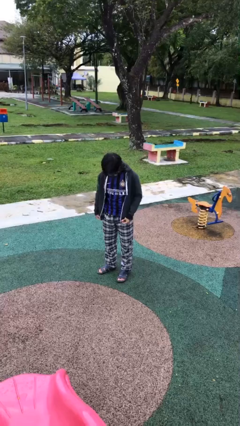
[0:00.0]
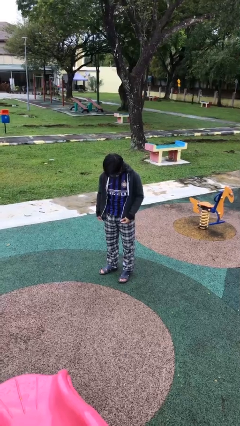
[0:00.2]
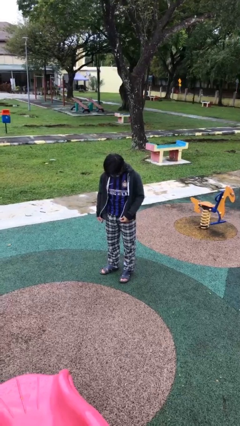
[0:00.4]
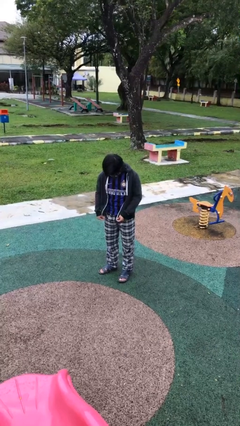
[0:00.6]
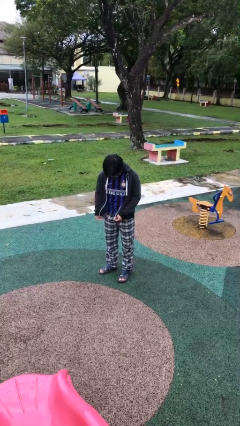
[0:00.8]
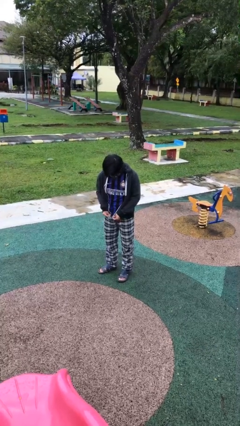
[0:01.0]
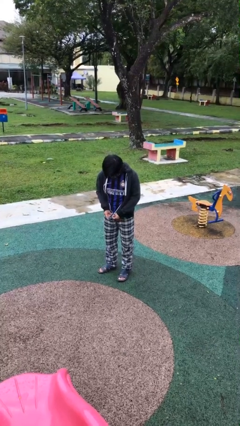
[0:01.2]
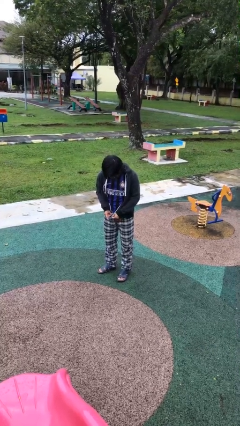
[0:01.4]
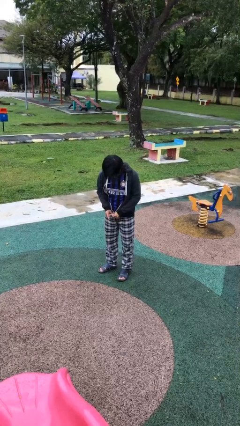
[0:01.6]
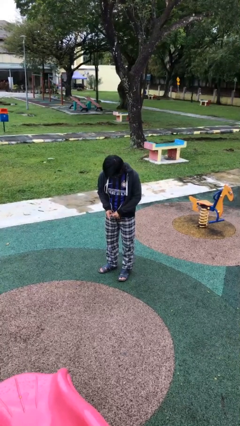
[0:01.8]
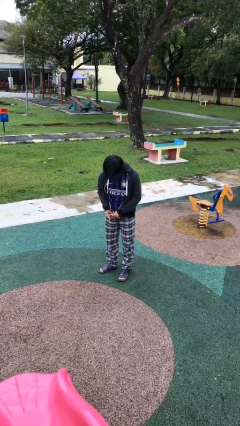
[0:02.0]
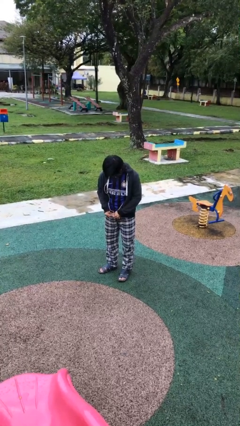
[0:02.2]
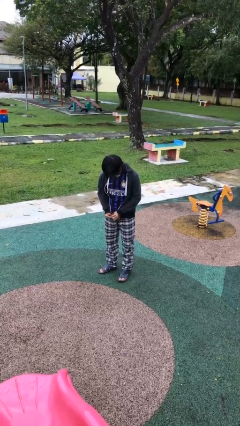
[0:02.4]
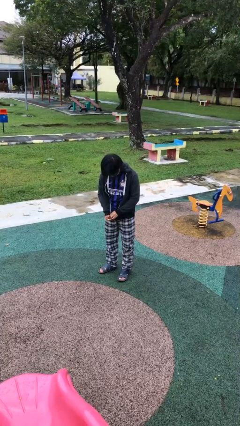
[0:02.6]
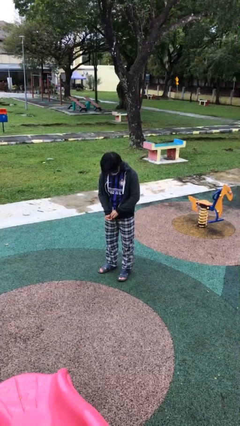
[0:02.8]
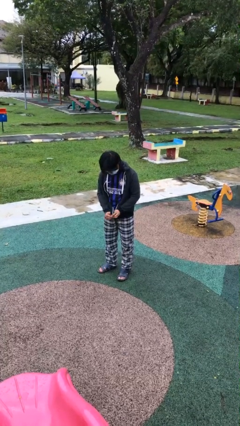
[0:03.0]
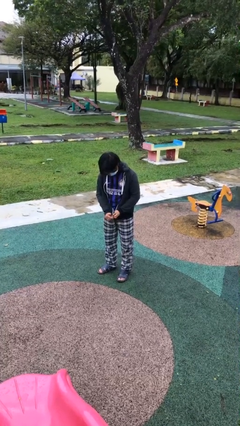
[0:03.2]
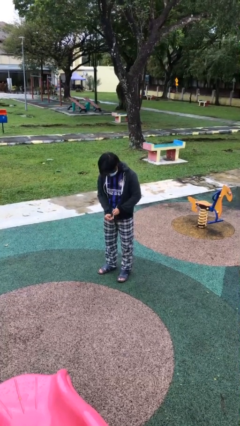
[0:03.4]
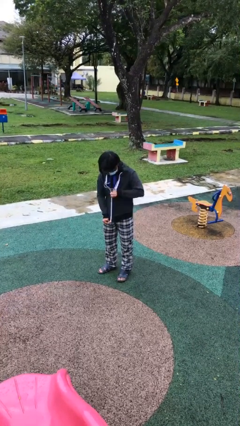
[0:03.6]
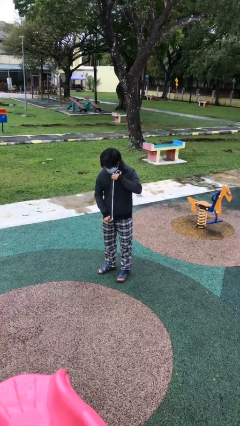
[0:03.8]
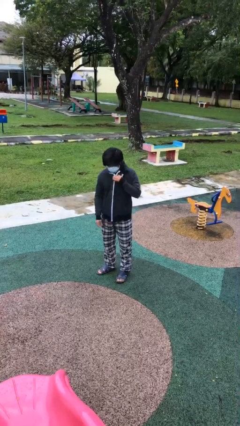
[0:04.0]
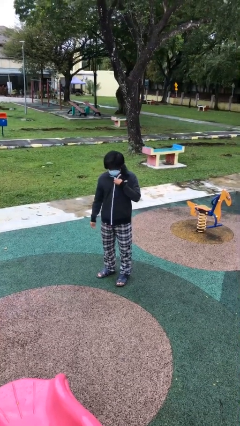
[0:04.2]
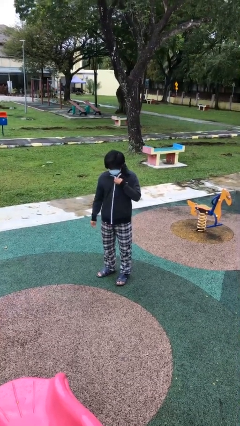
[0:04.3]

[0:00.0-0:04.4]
person zips up jacket

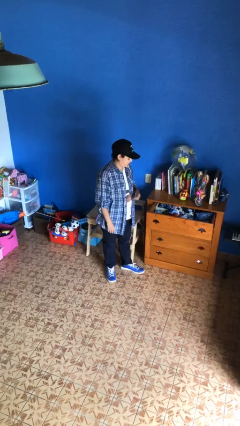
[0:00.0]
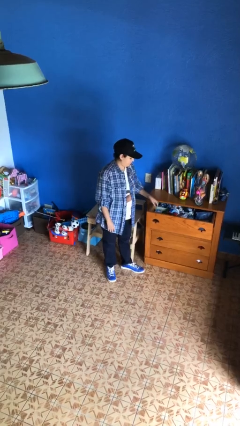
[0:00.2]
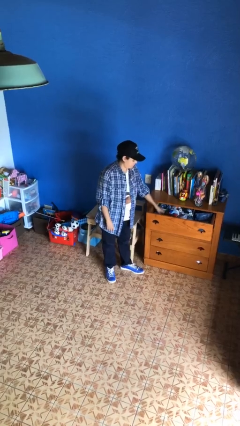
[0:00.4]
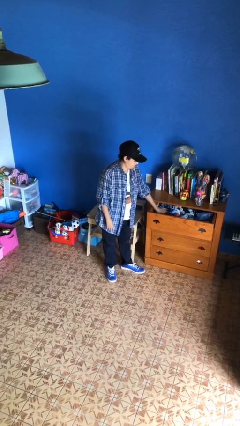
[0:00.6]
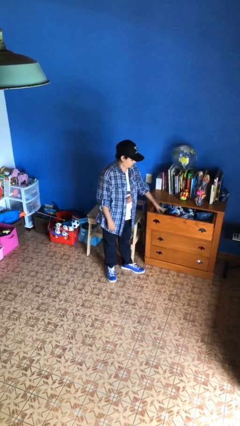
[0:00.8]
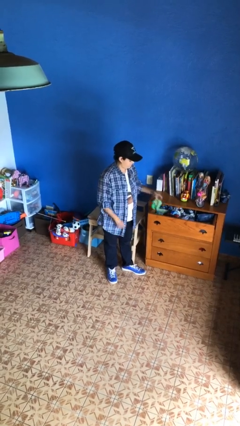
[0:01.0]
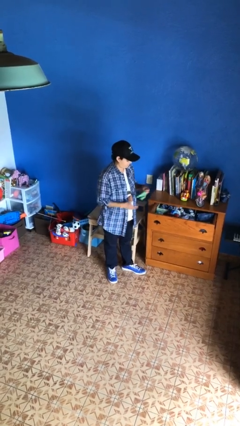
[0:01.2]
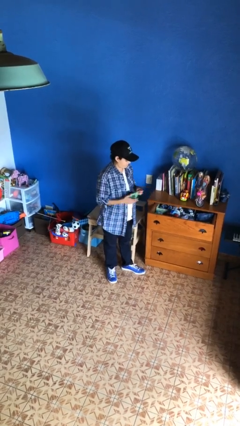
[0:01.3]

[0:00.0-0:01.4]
person takes clothes from dresser

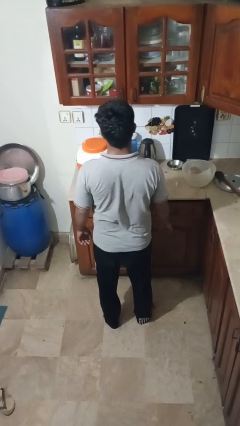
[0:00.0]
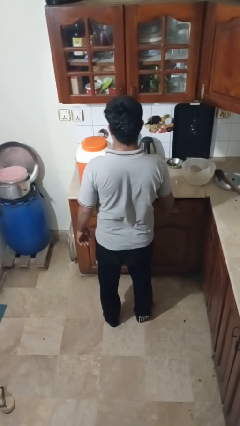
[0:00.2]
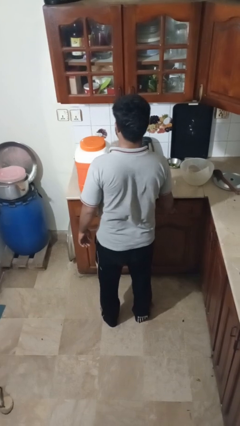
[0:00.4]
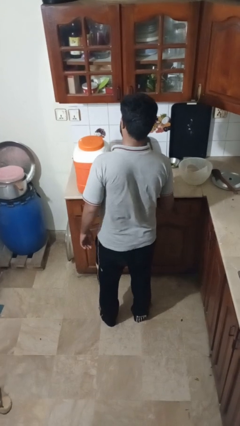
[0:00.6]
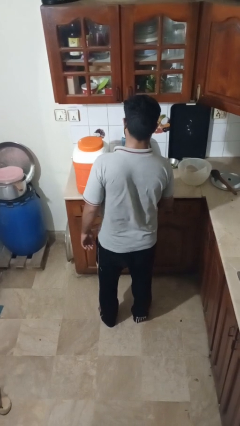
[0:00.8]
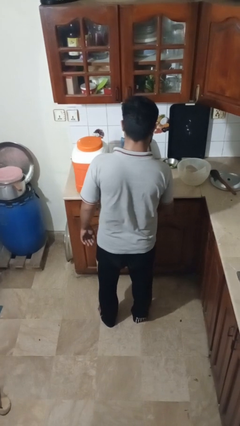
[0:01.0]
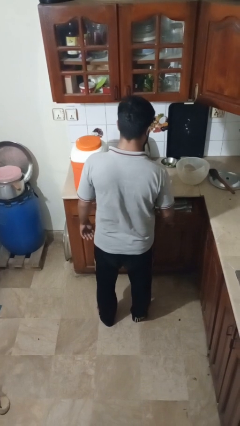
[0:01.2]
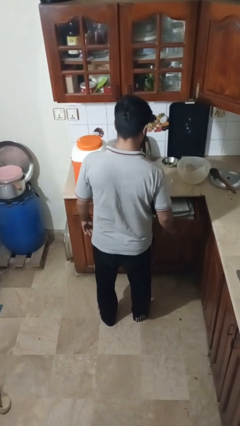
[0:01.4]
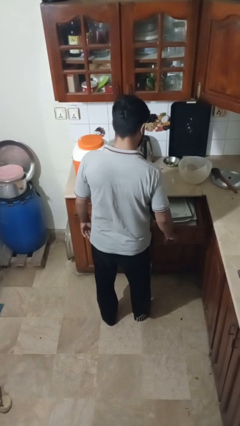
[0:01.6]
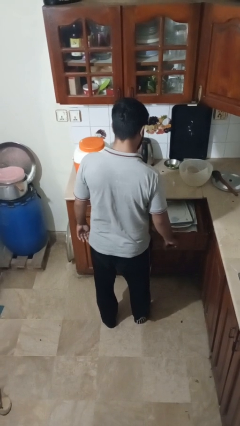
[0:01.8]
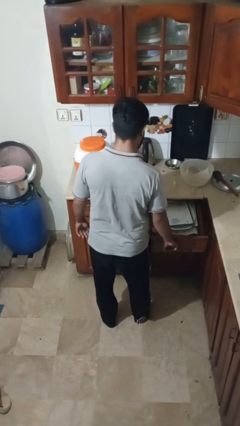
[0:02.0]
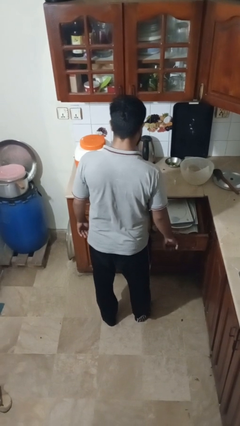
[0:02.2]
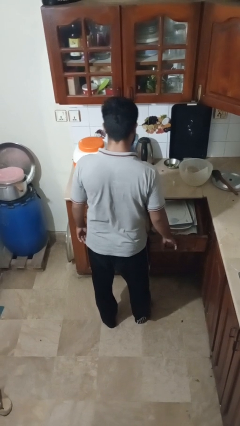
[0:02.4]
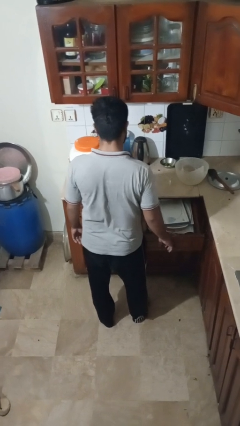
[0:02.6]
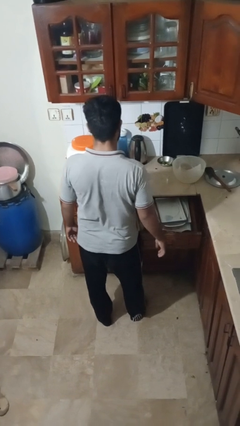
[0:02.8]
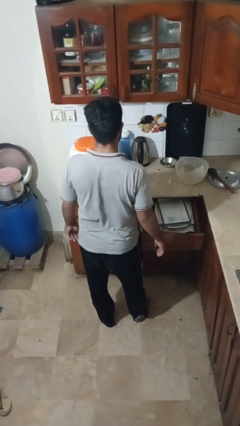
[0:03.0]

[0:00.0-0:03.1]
person opens kitchen drawer

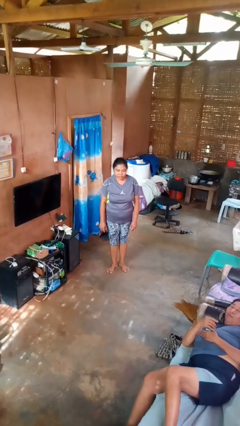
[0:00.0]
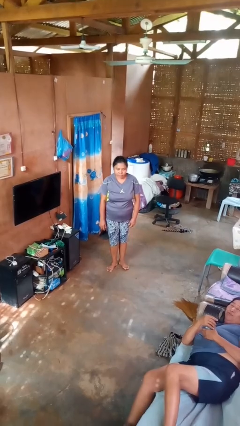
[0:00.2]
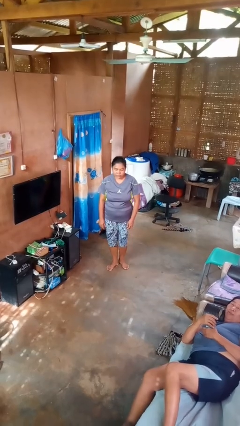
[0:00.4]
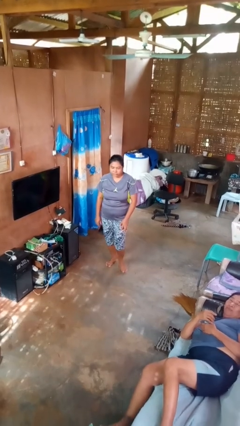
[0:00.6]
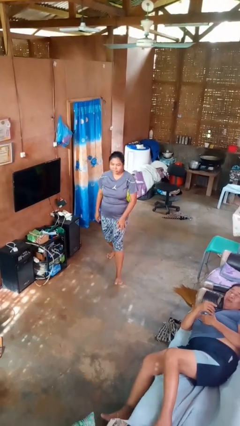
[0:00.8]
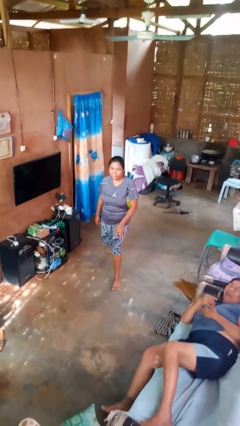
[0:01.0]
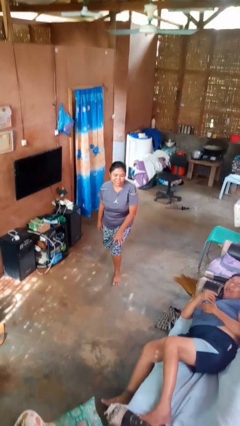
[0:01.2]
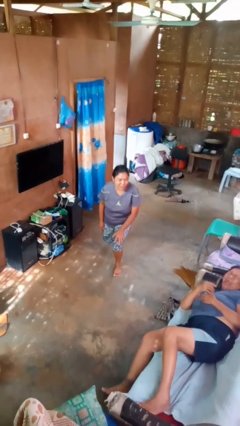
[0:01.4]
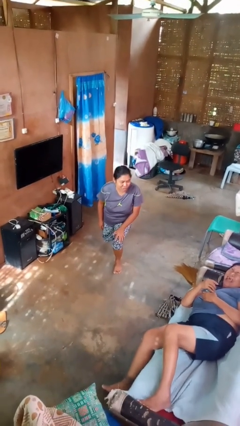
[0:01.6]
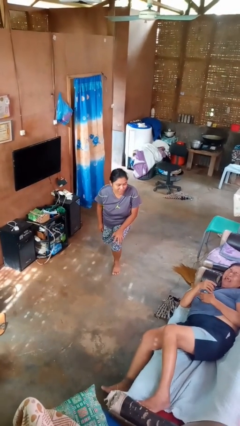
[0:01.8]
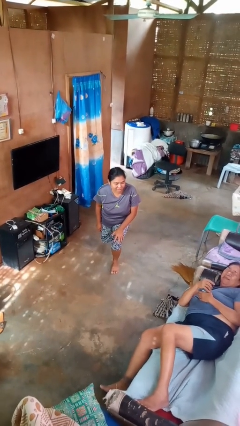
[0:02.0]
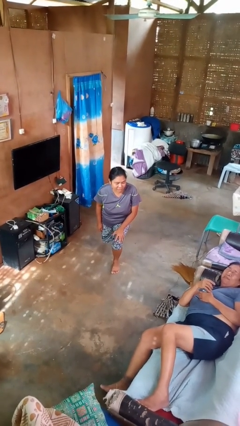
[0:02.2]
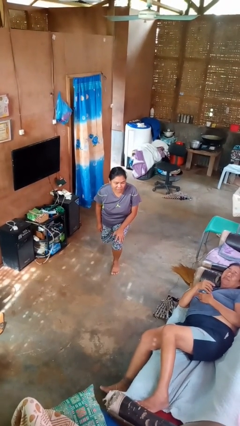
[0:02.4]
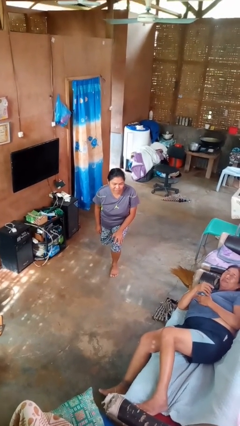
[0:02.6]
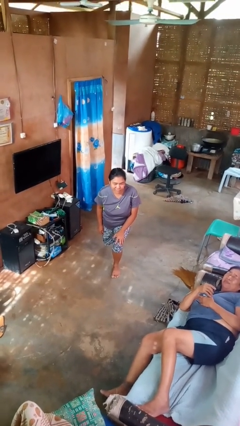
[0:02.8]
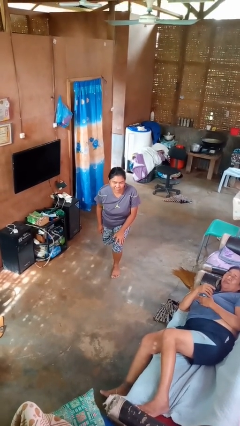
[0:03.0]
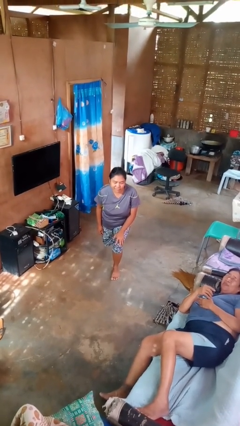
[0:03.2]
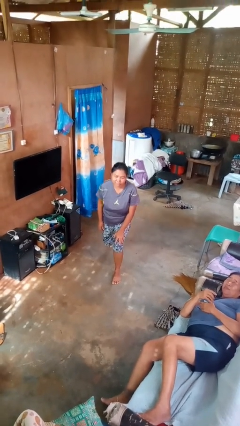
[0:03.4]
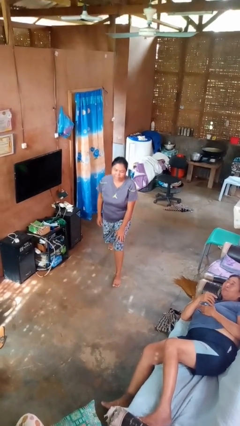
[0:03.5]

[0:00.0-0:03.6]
person exercises with lunges

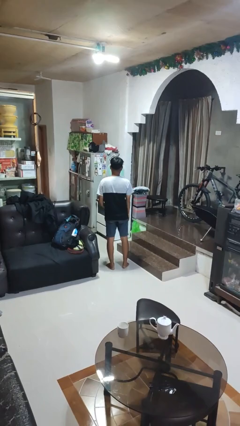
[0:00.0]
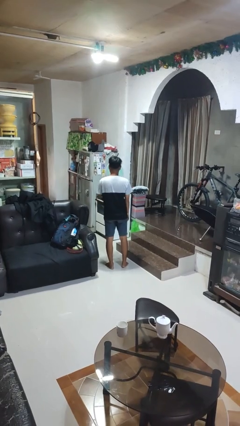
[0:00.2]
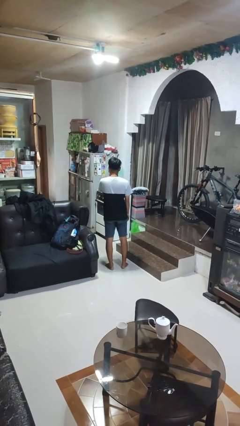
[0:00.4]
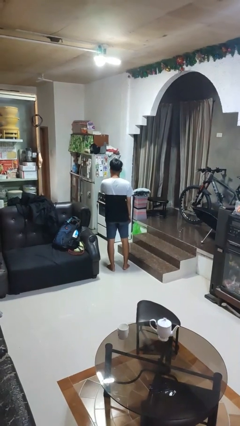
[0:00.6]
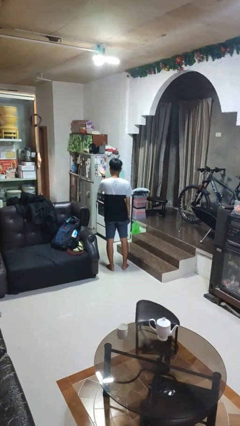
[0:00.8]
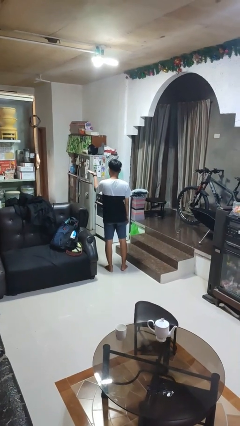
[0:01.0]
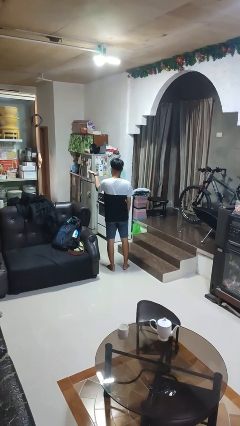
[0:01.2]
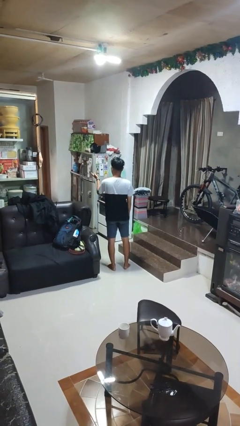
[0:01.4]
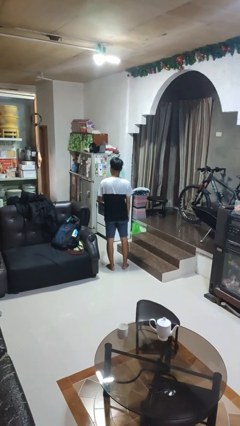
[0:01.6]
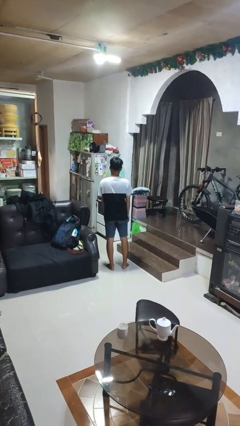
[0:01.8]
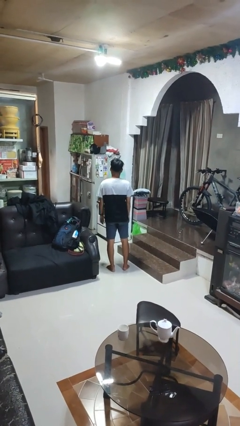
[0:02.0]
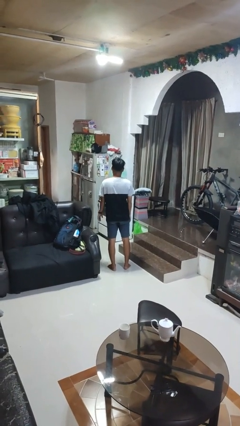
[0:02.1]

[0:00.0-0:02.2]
person gestures blow kiss

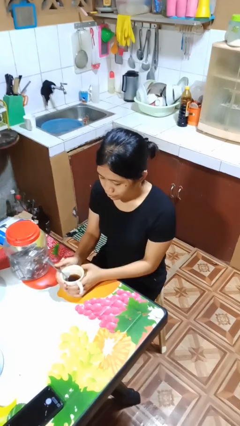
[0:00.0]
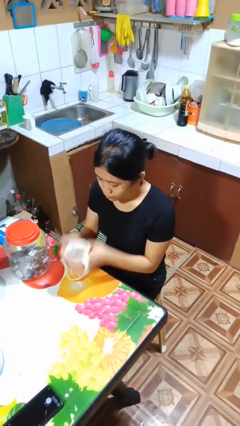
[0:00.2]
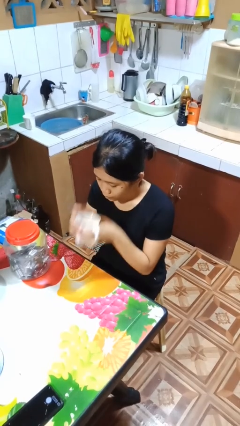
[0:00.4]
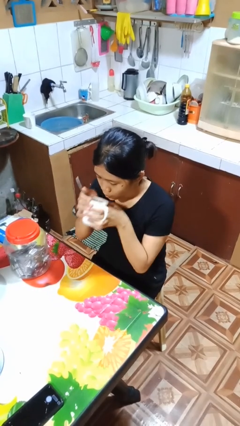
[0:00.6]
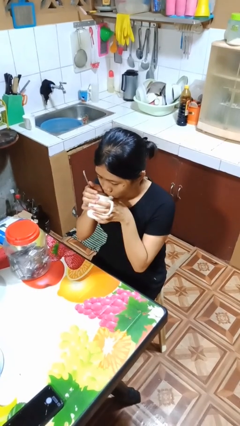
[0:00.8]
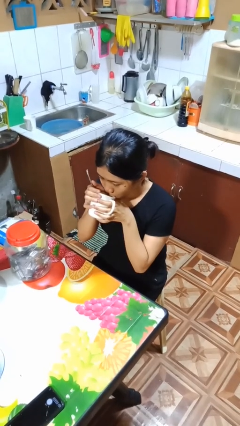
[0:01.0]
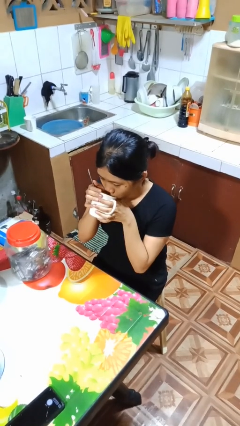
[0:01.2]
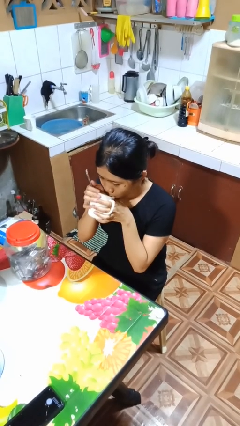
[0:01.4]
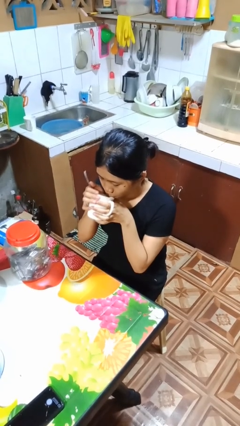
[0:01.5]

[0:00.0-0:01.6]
person drinks from mug

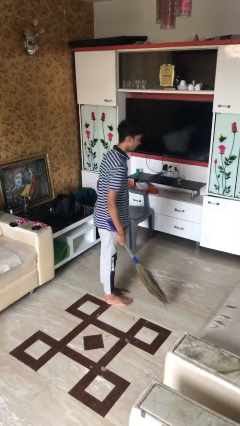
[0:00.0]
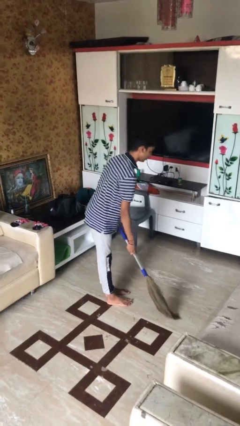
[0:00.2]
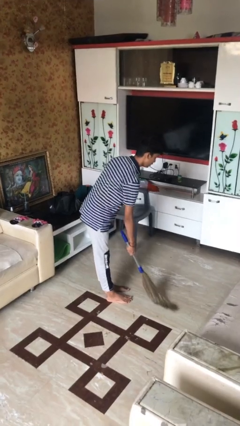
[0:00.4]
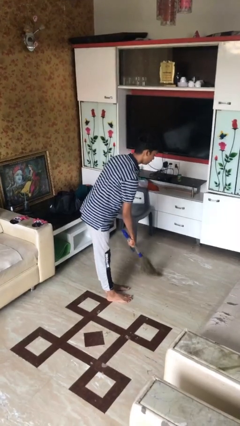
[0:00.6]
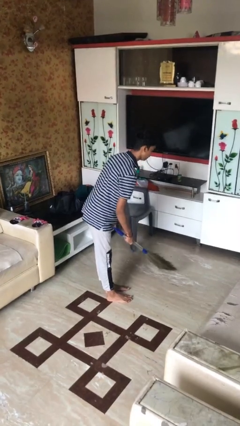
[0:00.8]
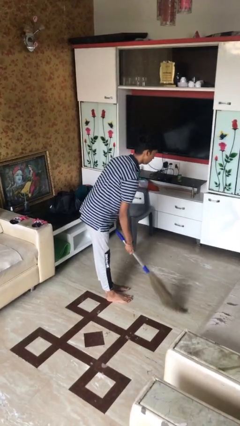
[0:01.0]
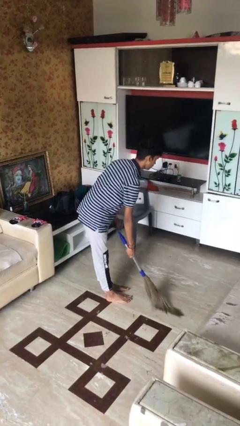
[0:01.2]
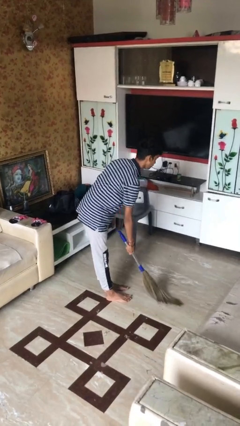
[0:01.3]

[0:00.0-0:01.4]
person sweeps floor
